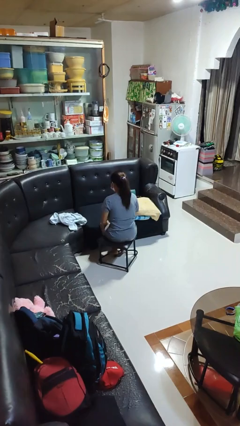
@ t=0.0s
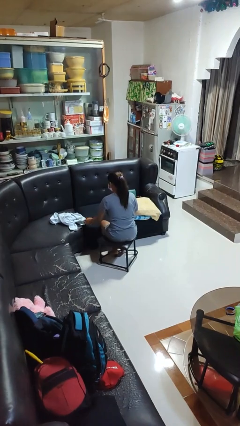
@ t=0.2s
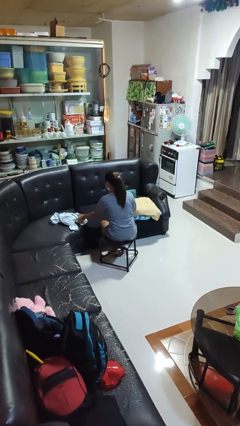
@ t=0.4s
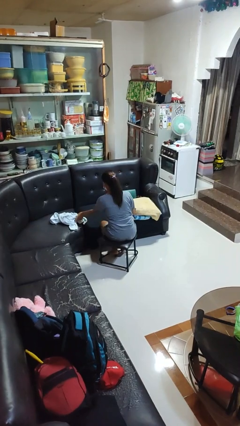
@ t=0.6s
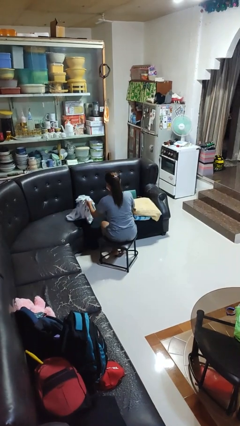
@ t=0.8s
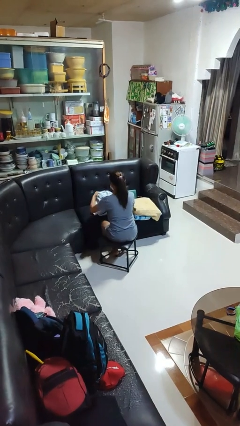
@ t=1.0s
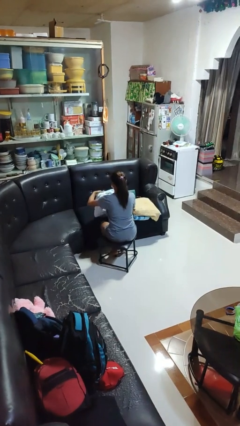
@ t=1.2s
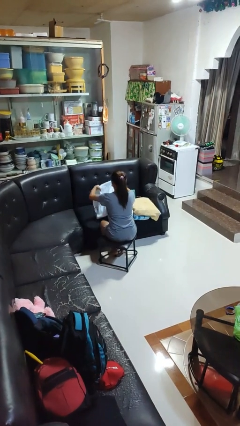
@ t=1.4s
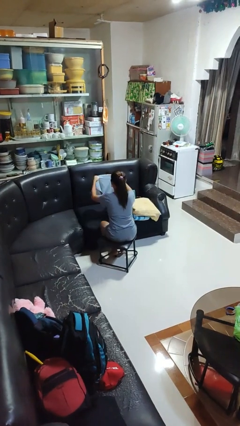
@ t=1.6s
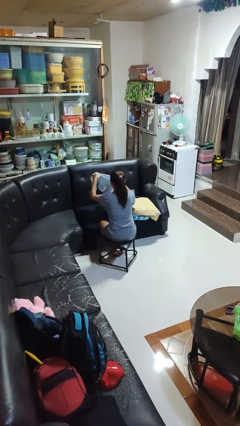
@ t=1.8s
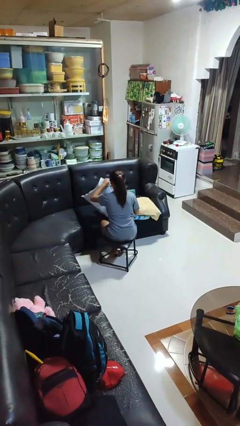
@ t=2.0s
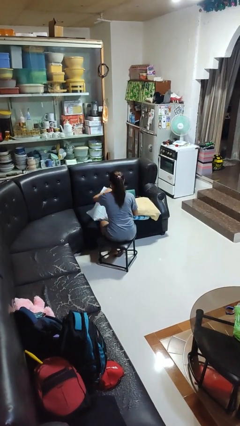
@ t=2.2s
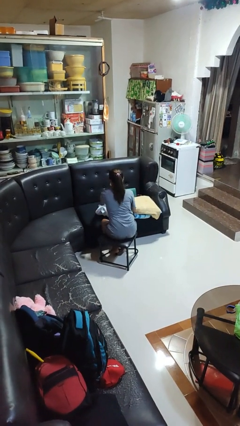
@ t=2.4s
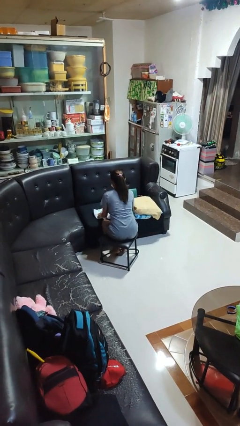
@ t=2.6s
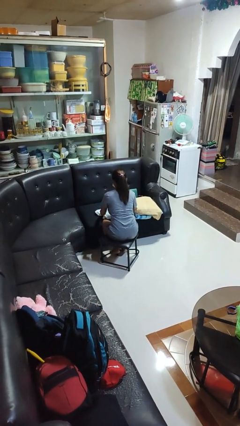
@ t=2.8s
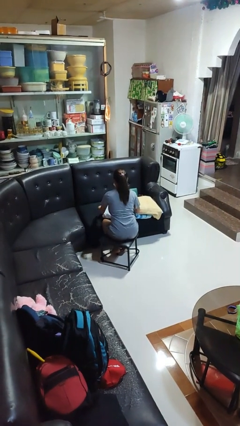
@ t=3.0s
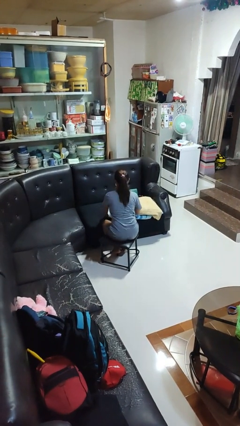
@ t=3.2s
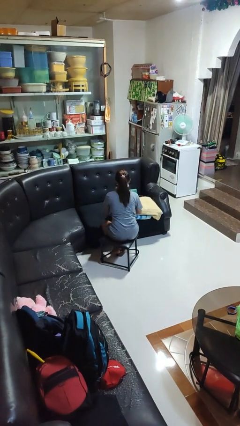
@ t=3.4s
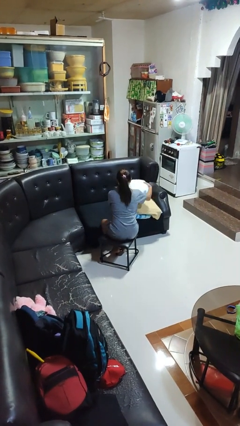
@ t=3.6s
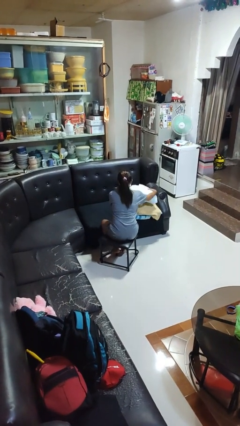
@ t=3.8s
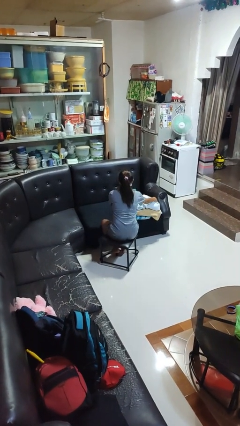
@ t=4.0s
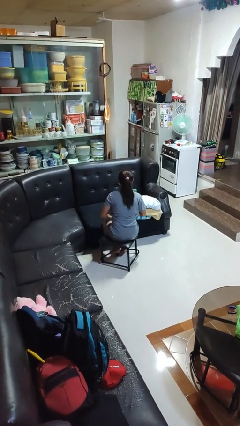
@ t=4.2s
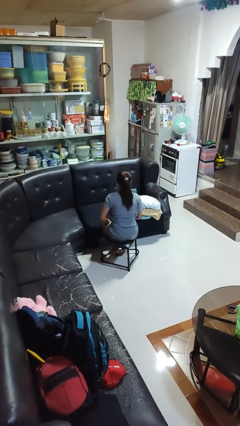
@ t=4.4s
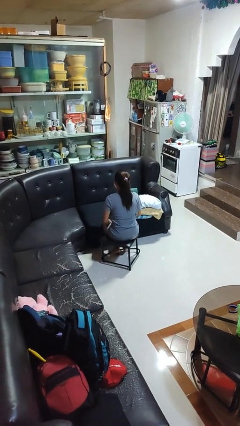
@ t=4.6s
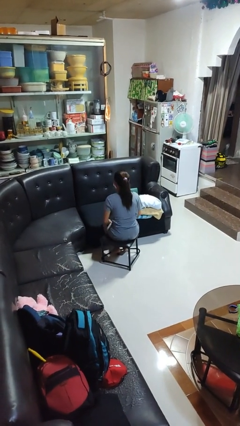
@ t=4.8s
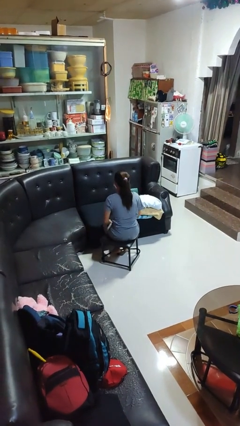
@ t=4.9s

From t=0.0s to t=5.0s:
person folds towel

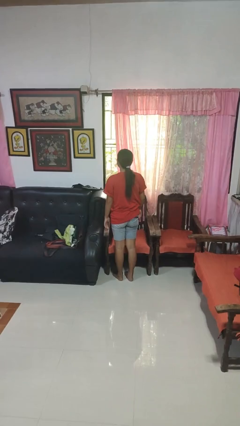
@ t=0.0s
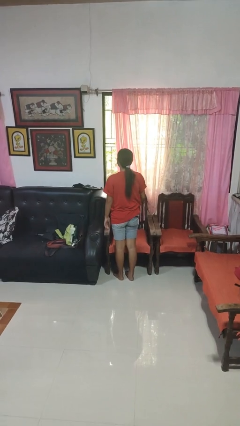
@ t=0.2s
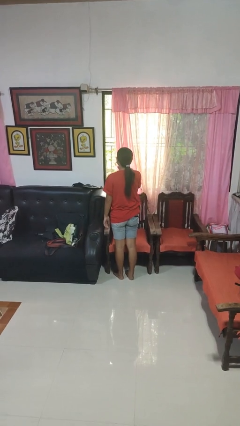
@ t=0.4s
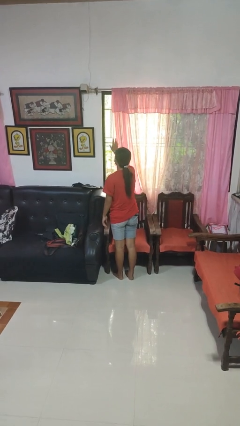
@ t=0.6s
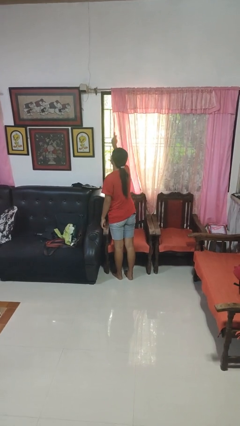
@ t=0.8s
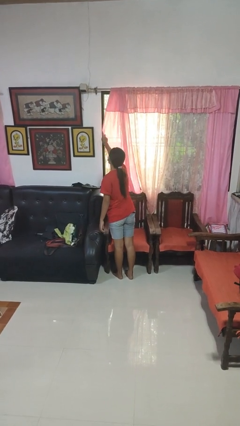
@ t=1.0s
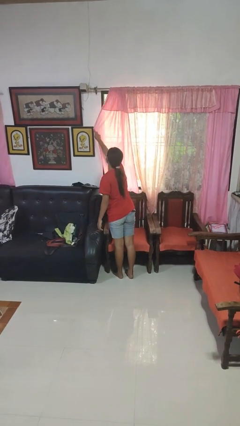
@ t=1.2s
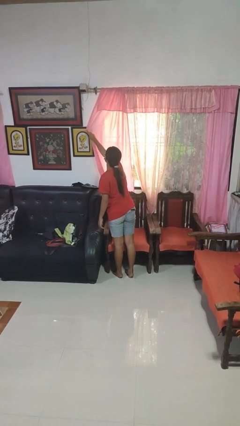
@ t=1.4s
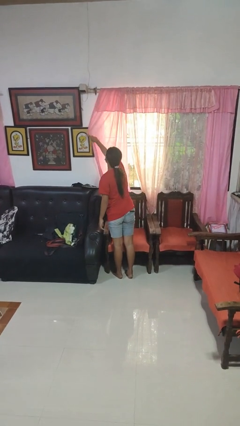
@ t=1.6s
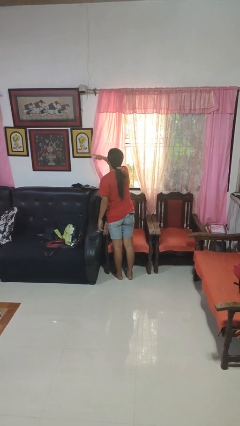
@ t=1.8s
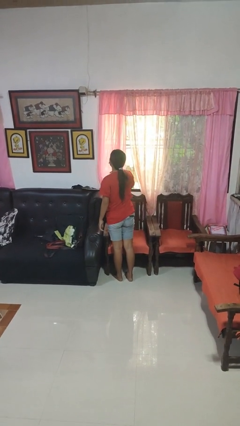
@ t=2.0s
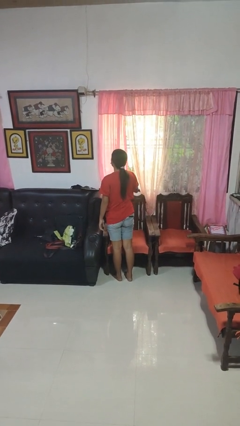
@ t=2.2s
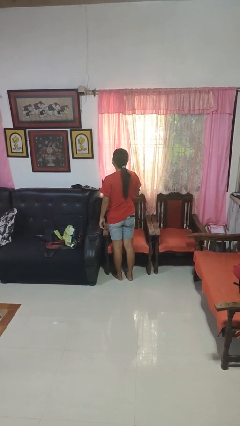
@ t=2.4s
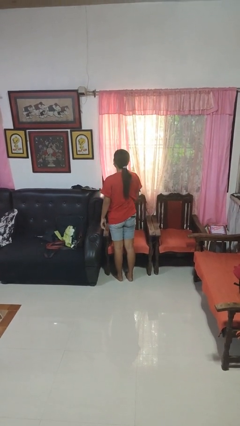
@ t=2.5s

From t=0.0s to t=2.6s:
person closes curtains

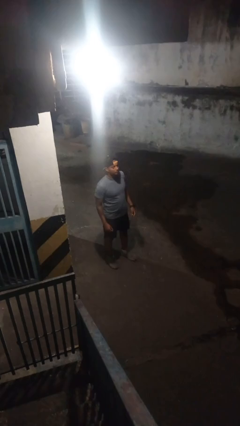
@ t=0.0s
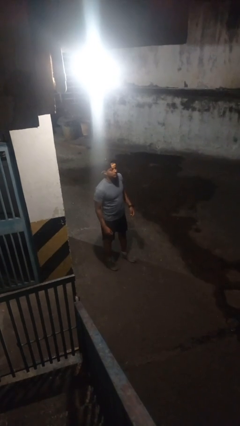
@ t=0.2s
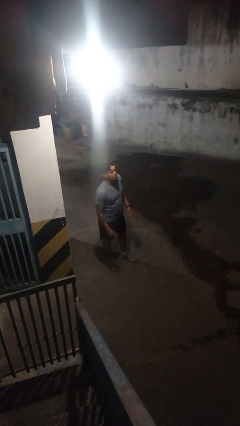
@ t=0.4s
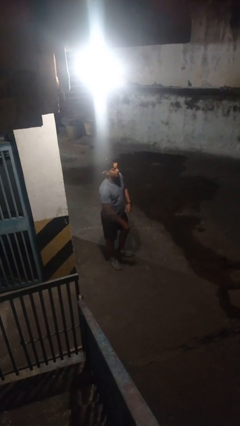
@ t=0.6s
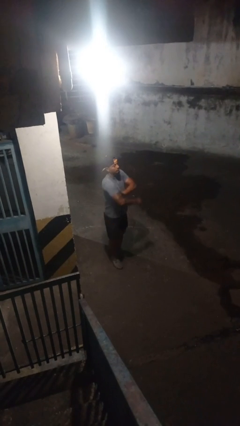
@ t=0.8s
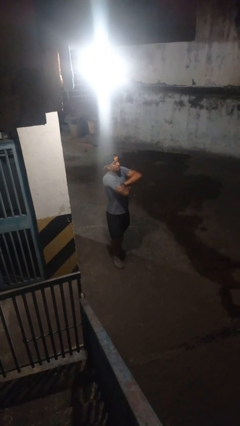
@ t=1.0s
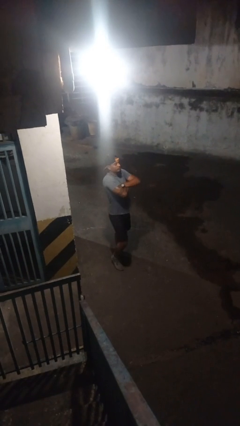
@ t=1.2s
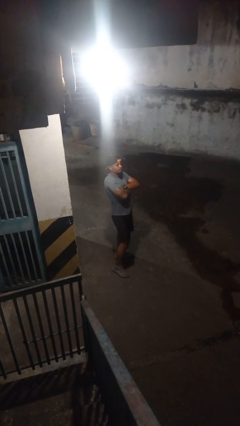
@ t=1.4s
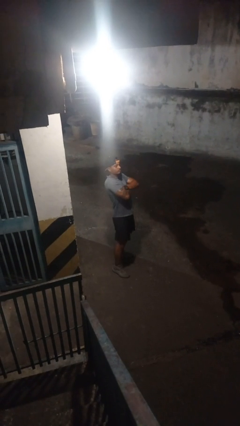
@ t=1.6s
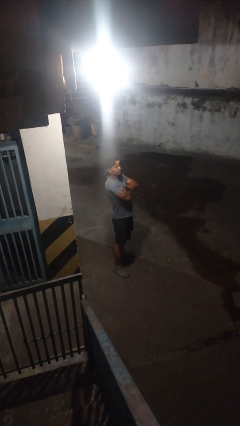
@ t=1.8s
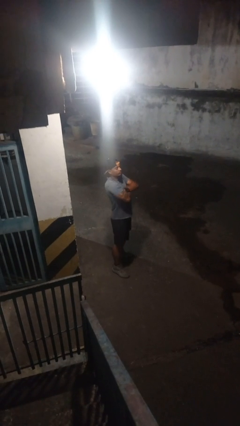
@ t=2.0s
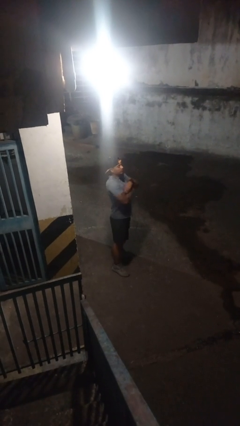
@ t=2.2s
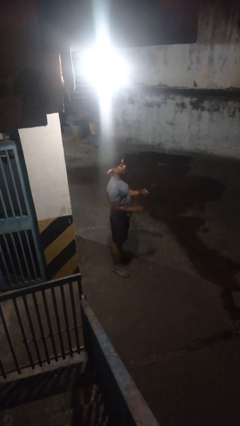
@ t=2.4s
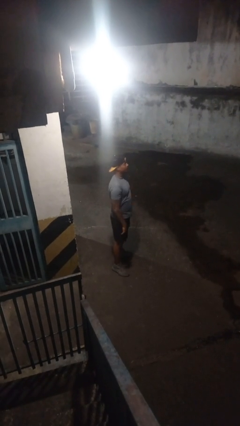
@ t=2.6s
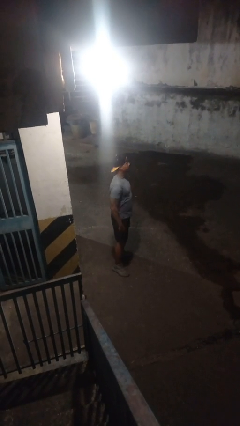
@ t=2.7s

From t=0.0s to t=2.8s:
person crosses arms

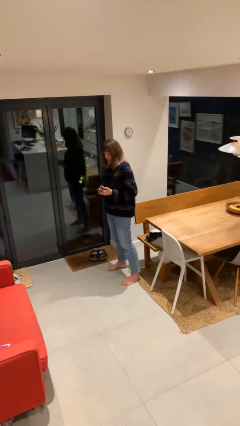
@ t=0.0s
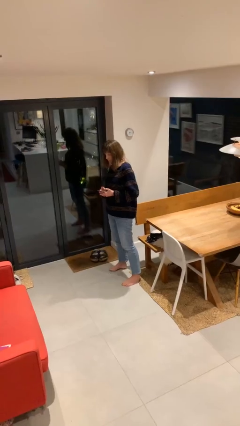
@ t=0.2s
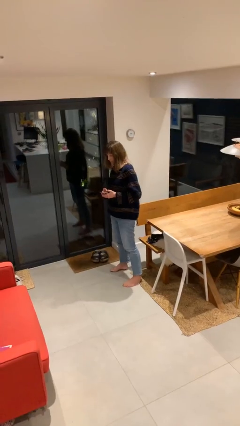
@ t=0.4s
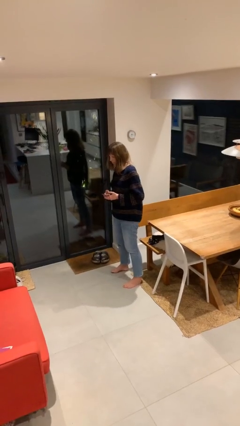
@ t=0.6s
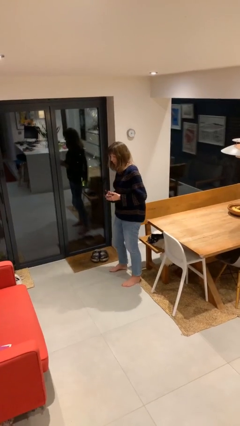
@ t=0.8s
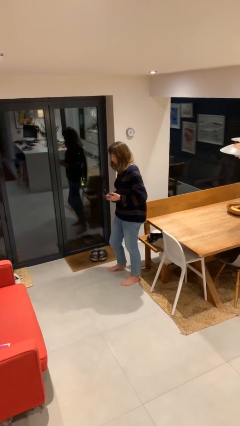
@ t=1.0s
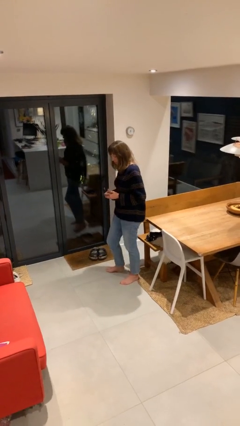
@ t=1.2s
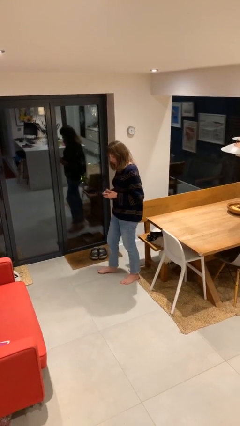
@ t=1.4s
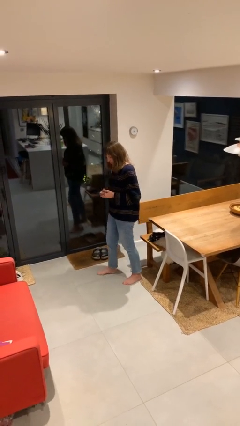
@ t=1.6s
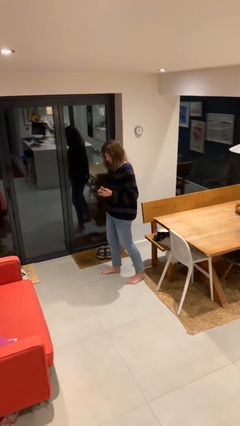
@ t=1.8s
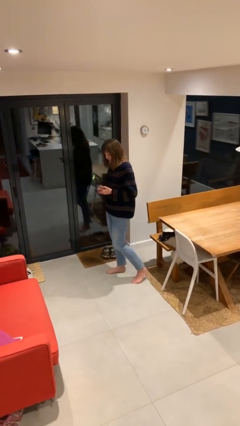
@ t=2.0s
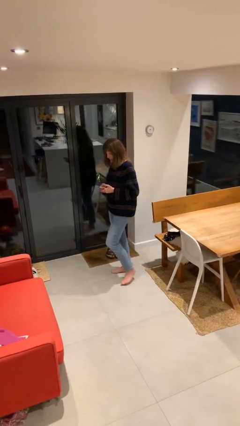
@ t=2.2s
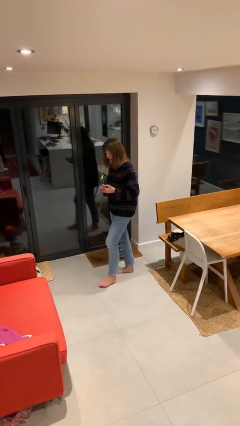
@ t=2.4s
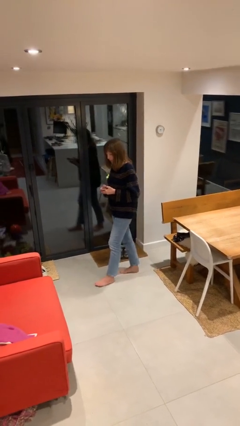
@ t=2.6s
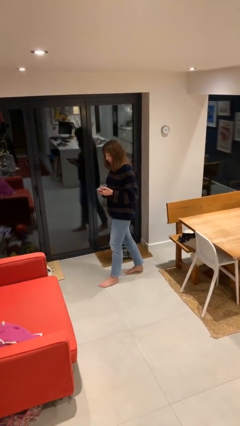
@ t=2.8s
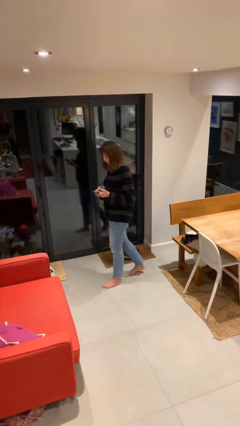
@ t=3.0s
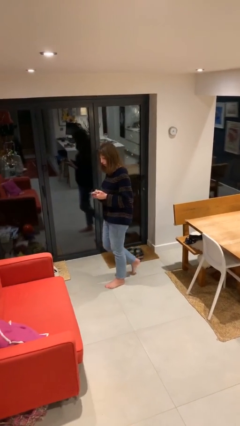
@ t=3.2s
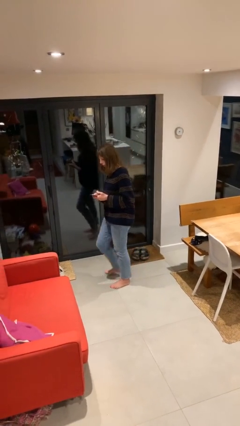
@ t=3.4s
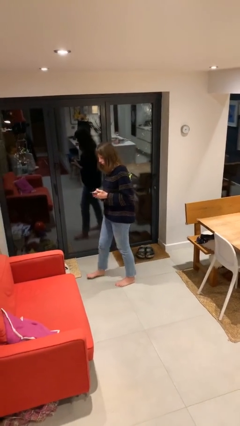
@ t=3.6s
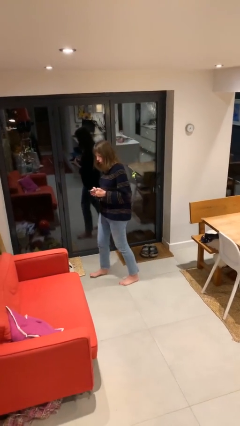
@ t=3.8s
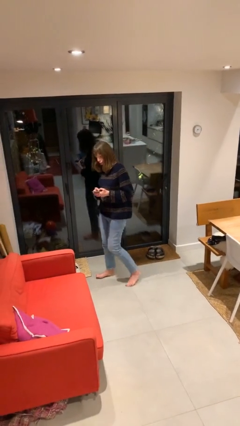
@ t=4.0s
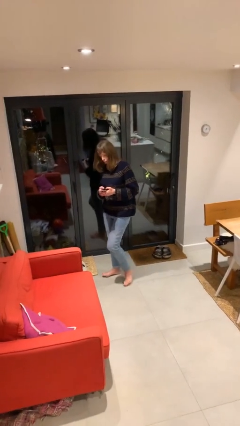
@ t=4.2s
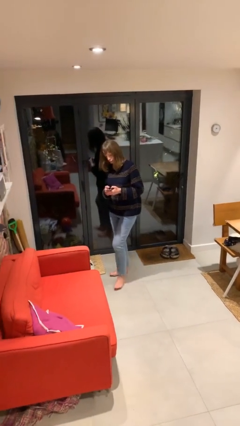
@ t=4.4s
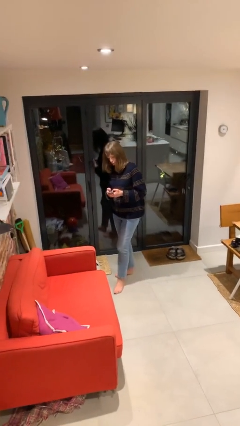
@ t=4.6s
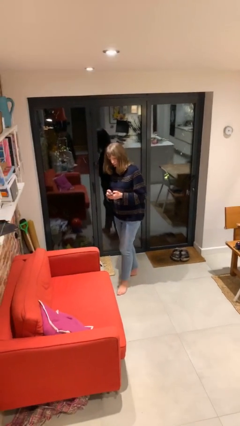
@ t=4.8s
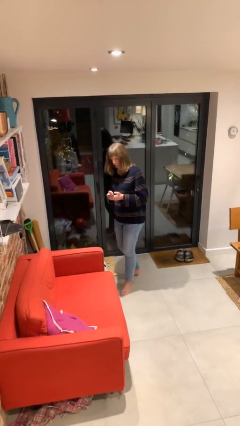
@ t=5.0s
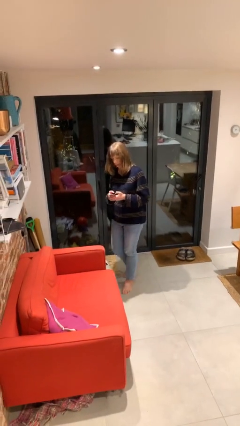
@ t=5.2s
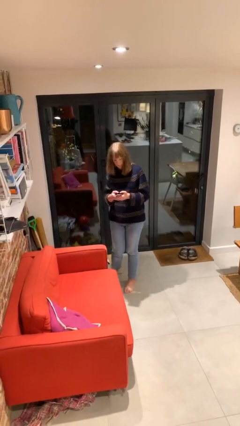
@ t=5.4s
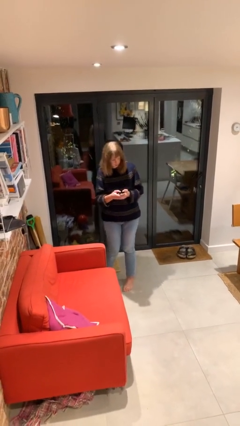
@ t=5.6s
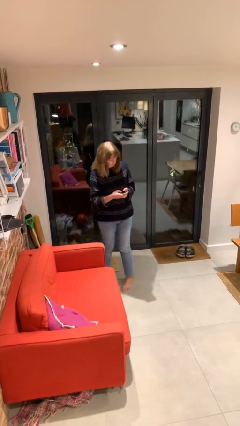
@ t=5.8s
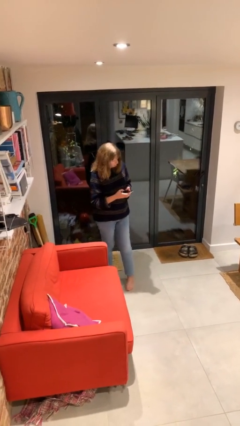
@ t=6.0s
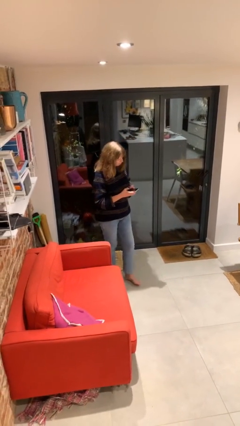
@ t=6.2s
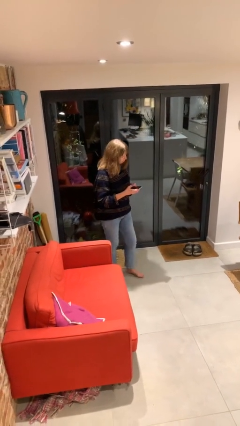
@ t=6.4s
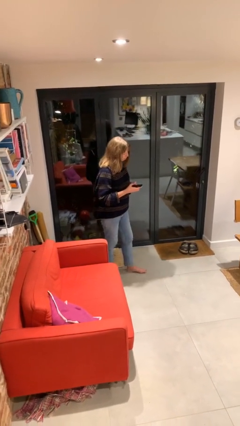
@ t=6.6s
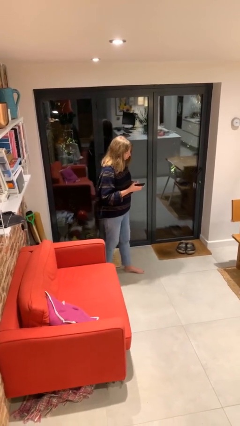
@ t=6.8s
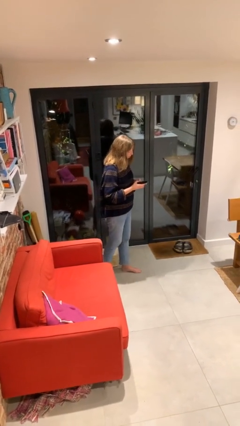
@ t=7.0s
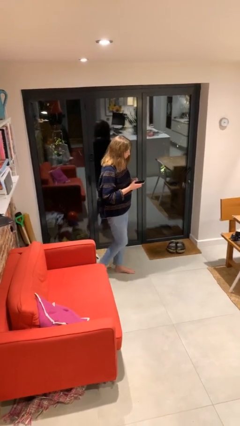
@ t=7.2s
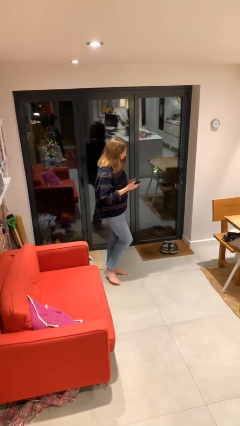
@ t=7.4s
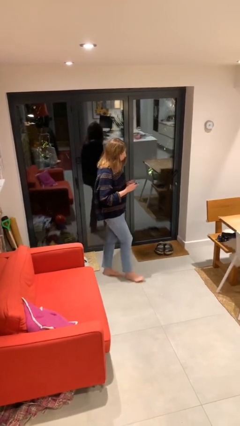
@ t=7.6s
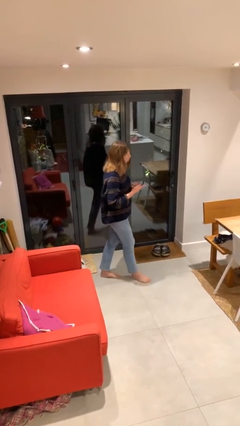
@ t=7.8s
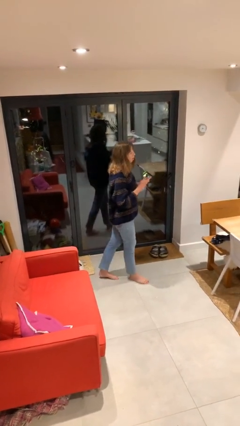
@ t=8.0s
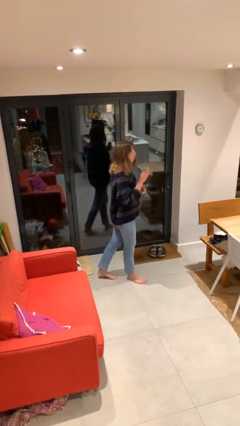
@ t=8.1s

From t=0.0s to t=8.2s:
person texts on phone
